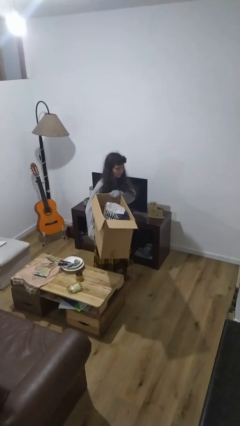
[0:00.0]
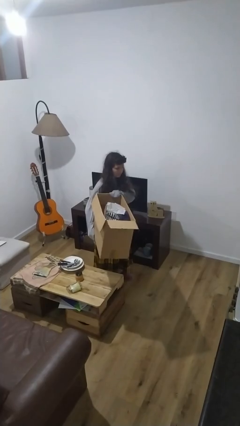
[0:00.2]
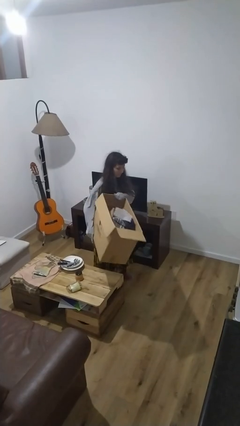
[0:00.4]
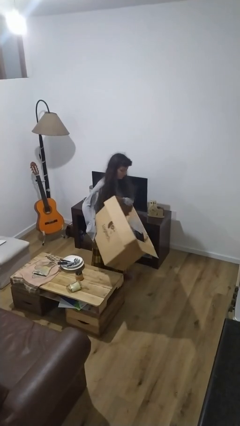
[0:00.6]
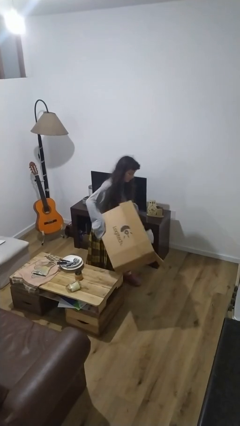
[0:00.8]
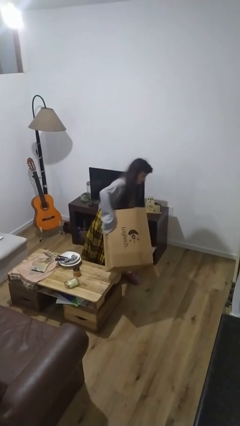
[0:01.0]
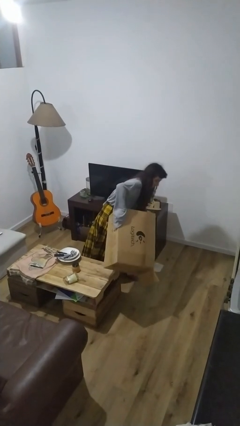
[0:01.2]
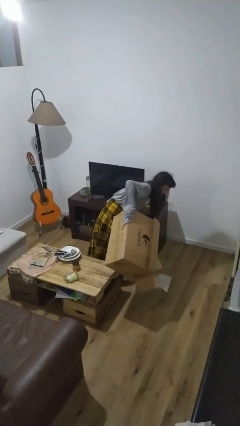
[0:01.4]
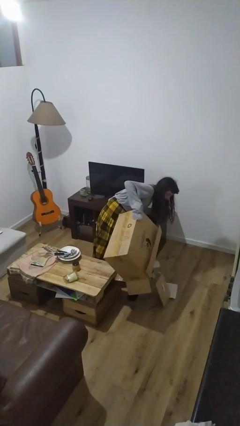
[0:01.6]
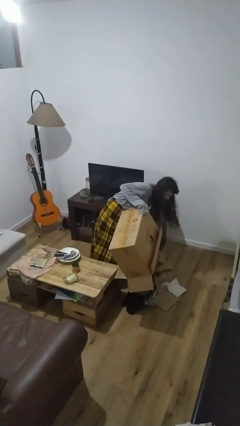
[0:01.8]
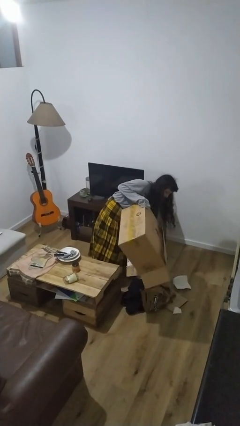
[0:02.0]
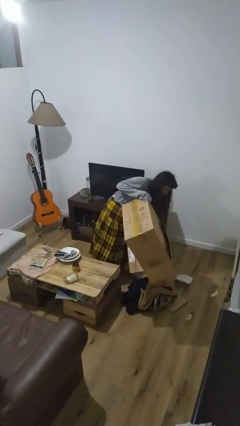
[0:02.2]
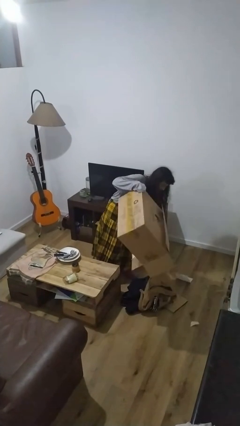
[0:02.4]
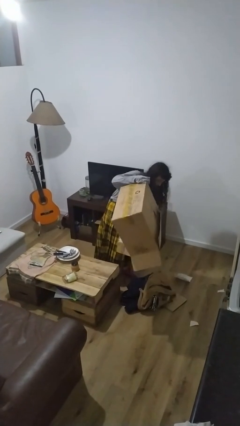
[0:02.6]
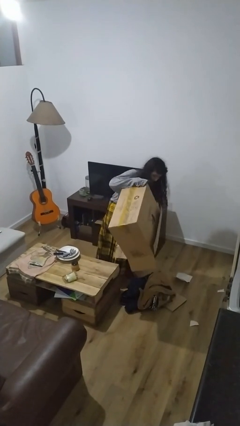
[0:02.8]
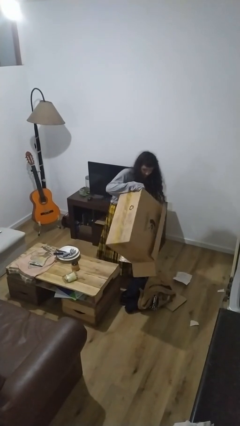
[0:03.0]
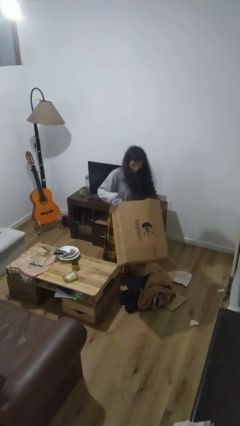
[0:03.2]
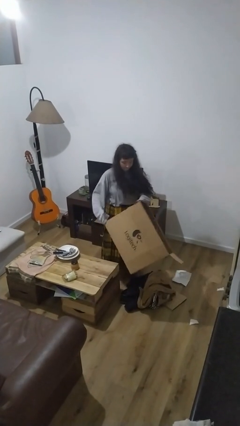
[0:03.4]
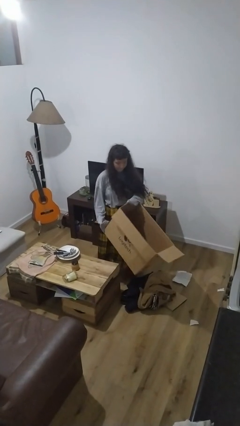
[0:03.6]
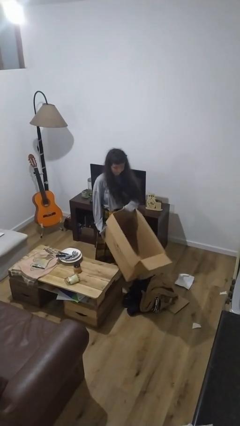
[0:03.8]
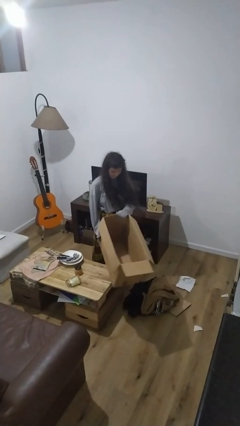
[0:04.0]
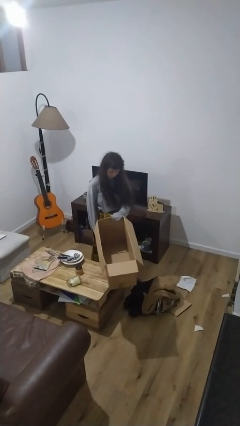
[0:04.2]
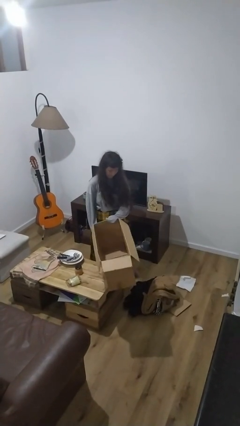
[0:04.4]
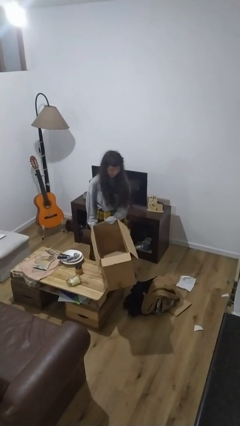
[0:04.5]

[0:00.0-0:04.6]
person unloads box onto floor

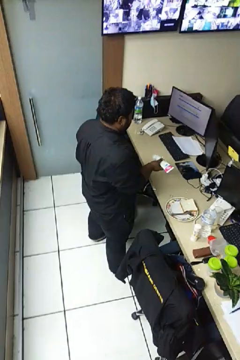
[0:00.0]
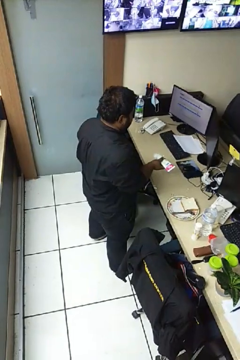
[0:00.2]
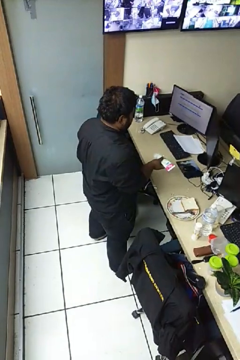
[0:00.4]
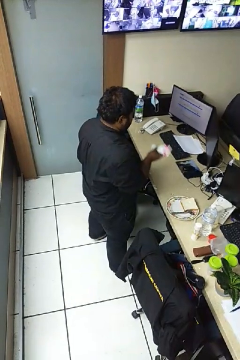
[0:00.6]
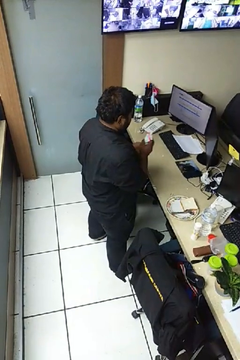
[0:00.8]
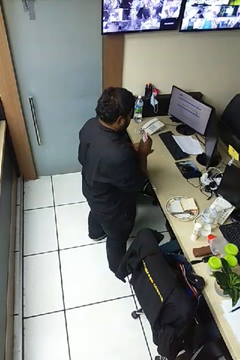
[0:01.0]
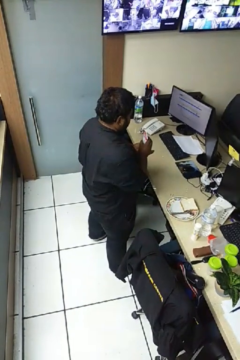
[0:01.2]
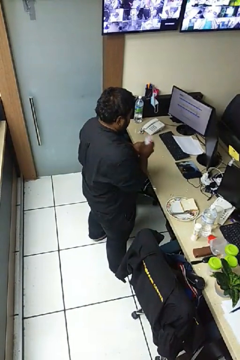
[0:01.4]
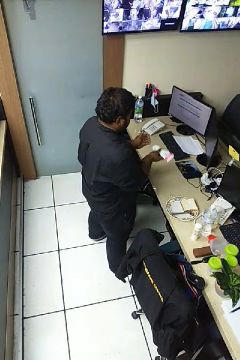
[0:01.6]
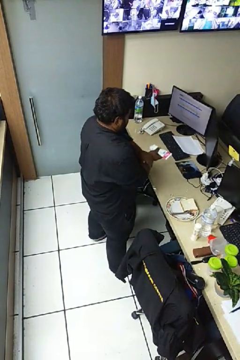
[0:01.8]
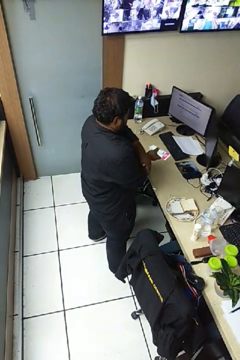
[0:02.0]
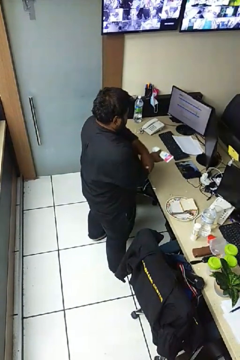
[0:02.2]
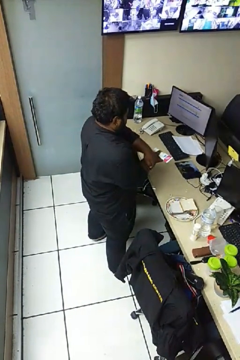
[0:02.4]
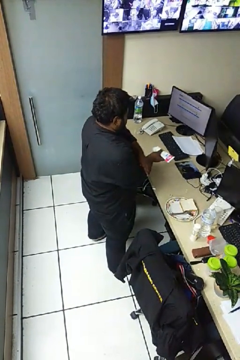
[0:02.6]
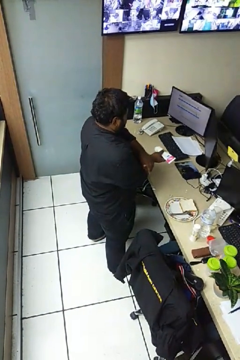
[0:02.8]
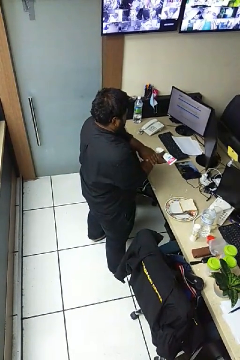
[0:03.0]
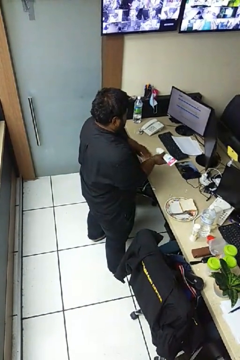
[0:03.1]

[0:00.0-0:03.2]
person applies sunscreen

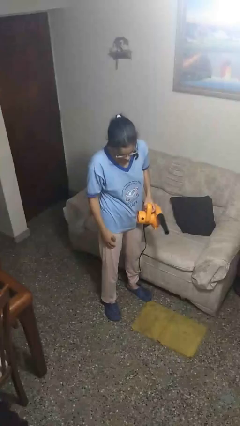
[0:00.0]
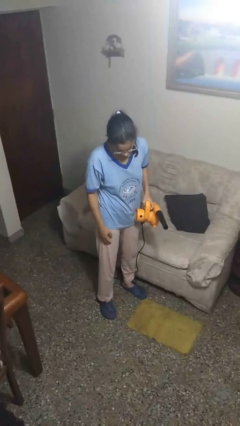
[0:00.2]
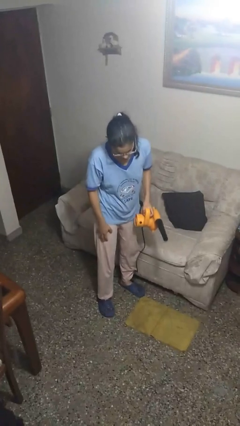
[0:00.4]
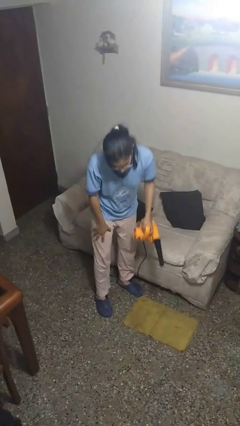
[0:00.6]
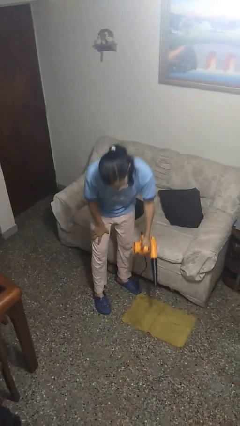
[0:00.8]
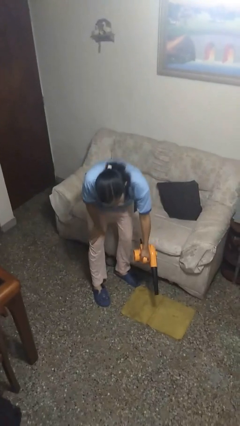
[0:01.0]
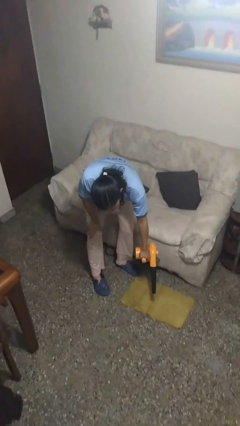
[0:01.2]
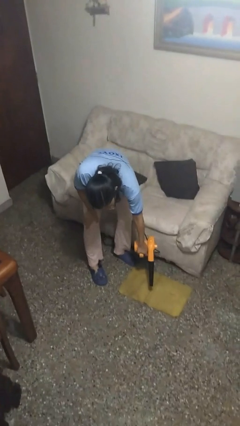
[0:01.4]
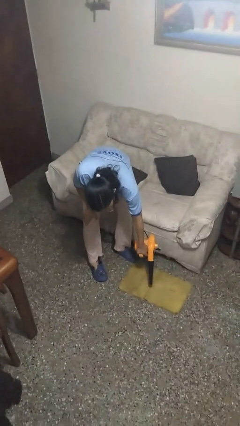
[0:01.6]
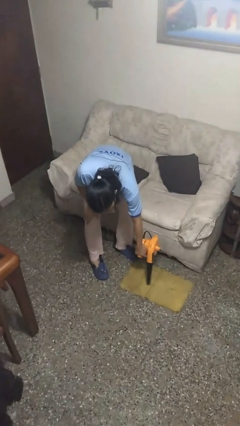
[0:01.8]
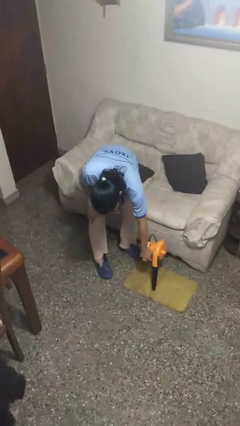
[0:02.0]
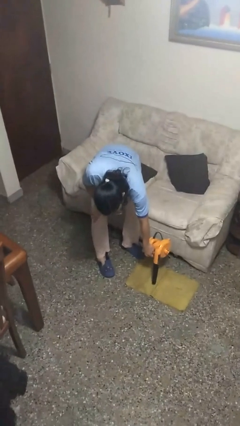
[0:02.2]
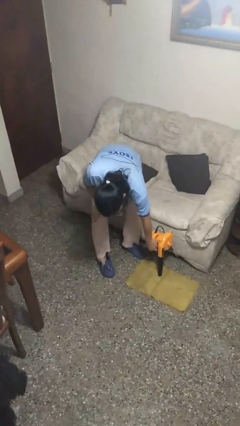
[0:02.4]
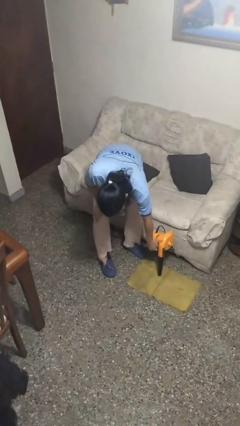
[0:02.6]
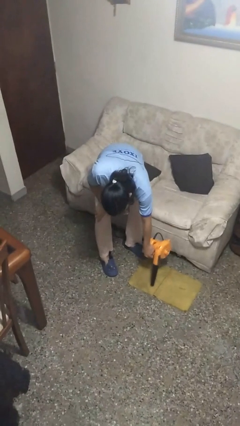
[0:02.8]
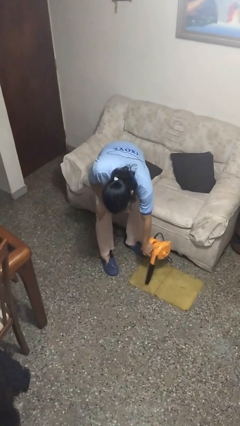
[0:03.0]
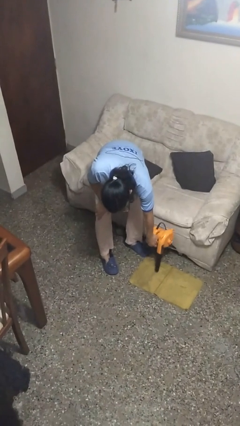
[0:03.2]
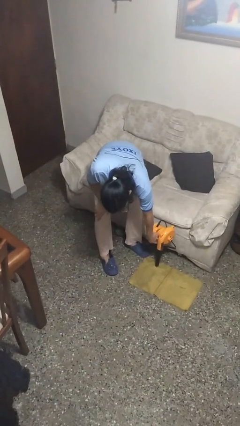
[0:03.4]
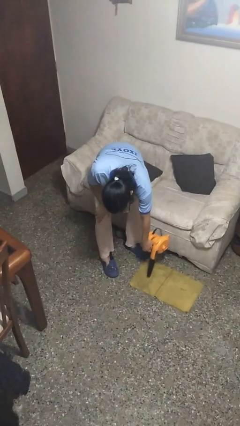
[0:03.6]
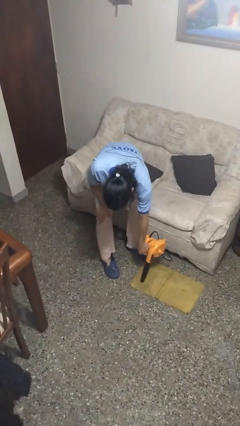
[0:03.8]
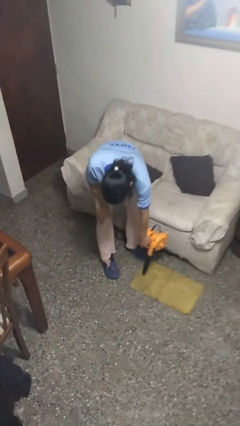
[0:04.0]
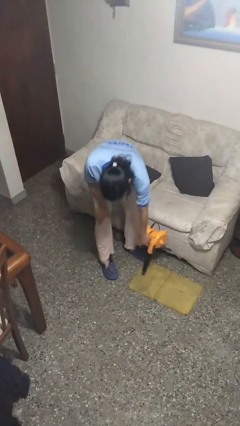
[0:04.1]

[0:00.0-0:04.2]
person vacuums carpet

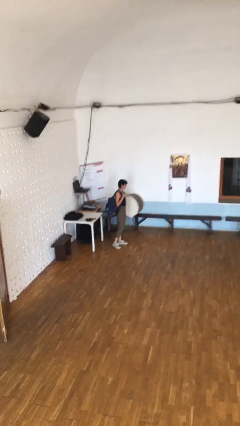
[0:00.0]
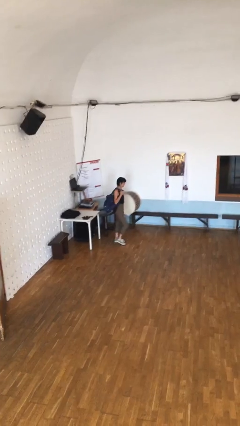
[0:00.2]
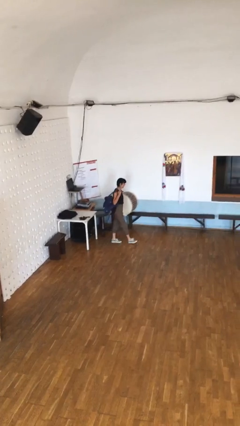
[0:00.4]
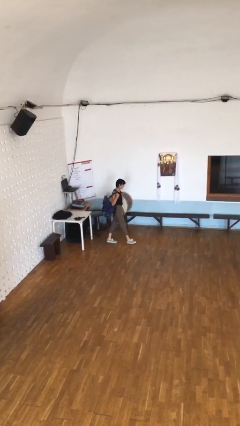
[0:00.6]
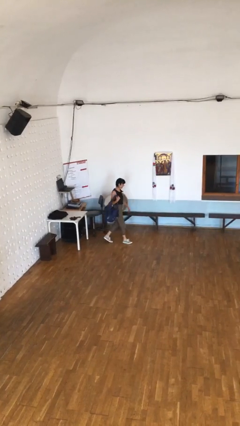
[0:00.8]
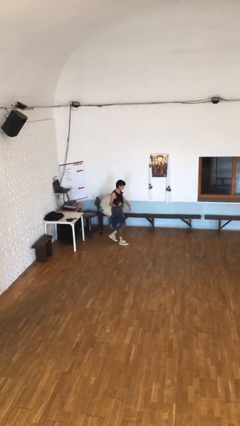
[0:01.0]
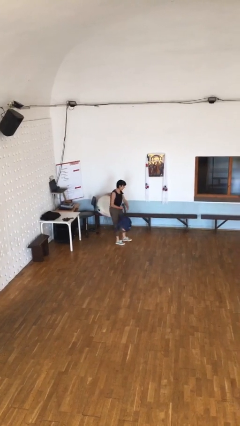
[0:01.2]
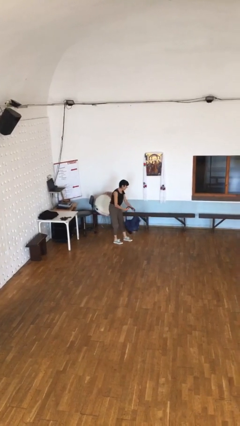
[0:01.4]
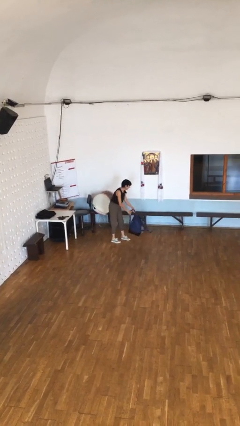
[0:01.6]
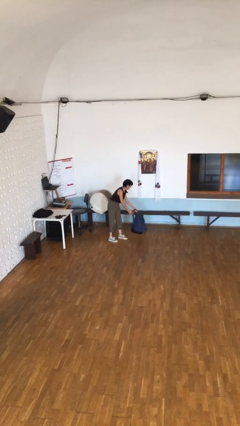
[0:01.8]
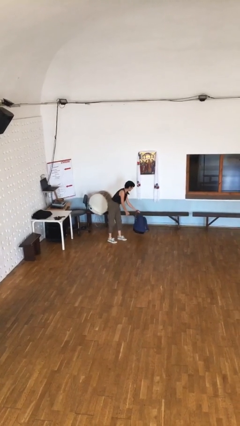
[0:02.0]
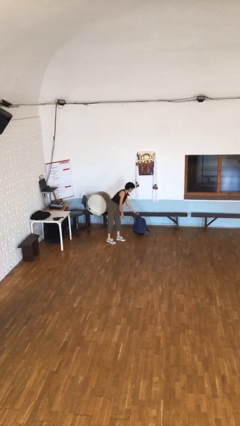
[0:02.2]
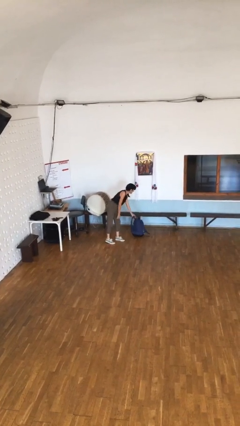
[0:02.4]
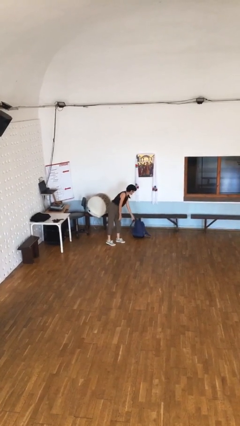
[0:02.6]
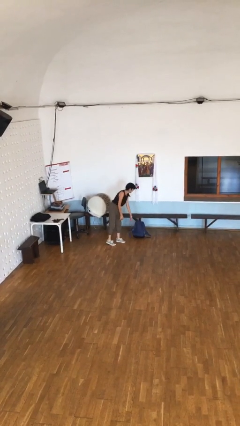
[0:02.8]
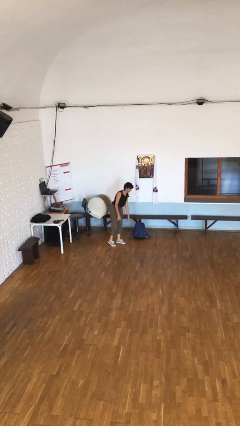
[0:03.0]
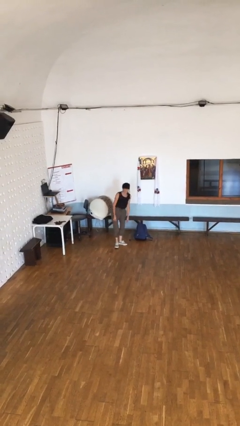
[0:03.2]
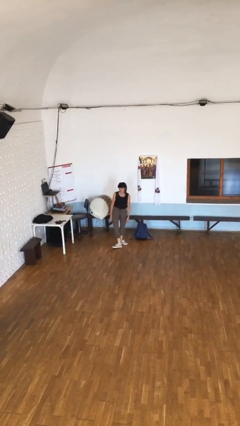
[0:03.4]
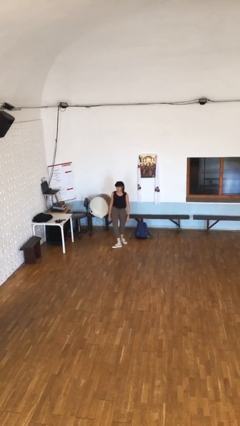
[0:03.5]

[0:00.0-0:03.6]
person puts down object on floor

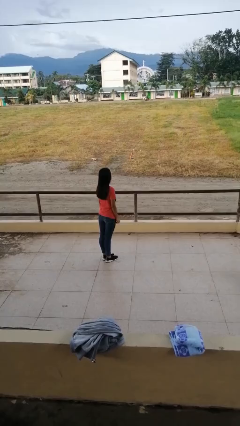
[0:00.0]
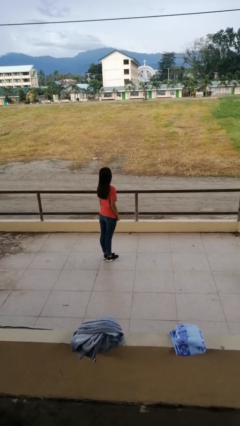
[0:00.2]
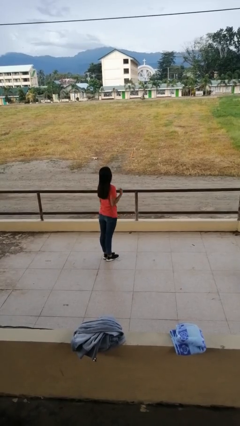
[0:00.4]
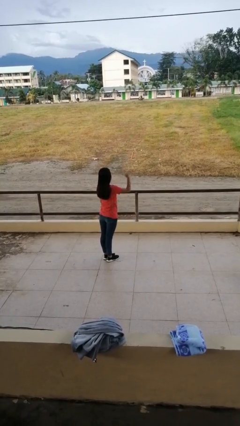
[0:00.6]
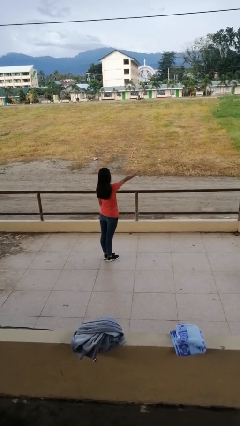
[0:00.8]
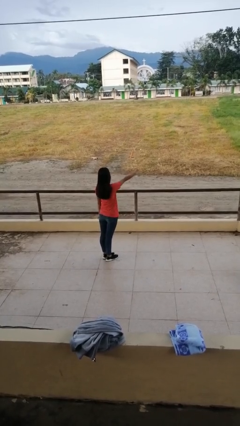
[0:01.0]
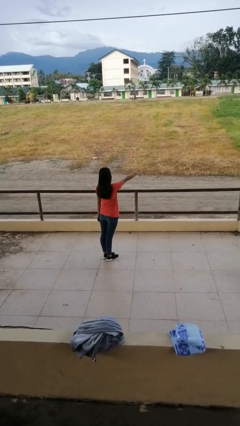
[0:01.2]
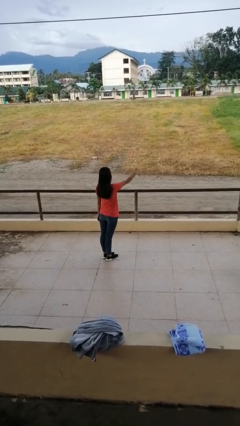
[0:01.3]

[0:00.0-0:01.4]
person punches

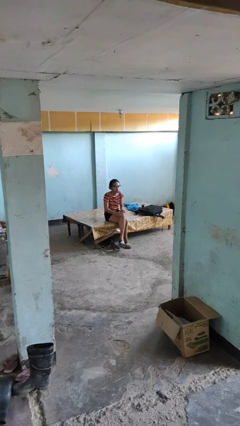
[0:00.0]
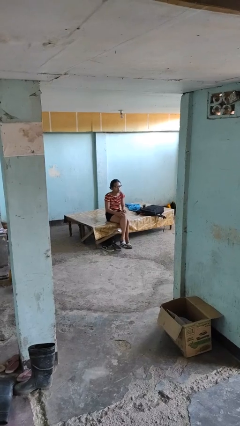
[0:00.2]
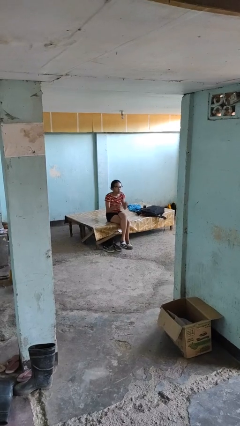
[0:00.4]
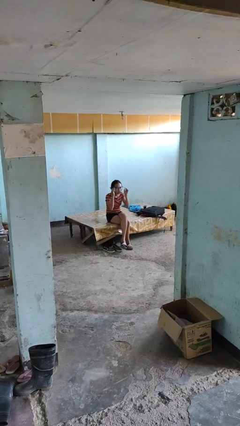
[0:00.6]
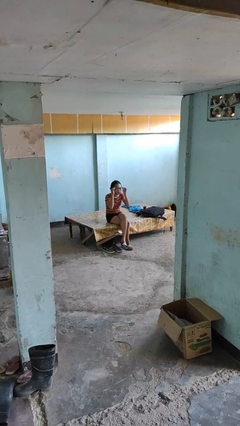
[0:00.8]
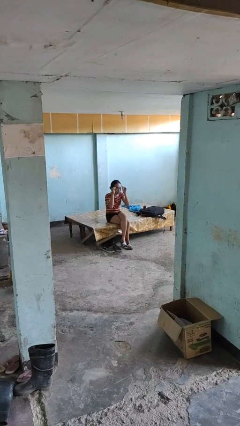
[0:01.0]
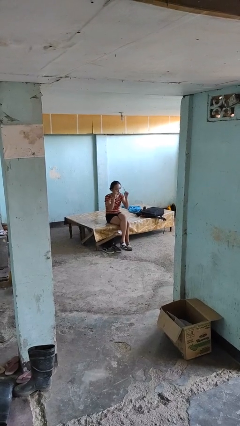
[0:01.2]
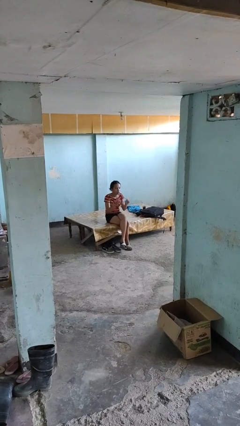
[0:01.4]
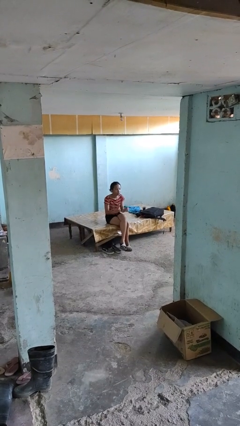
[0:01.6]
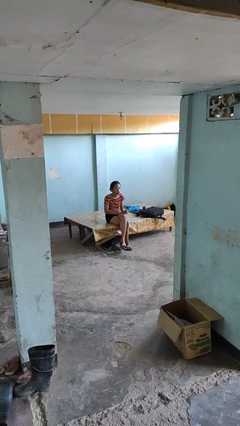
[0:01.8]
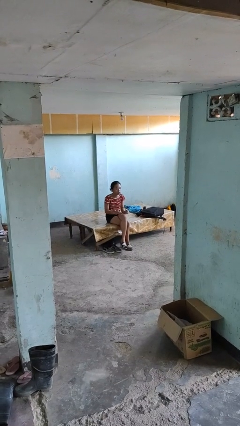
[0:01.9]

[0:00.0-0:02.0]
person takes off glasses
